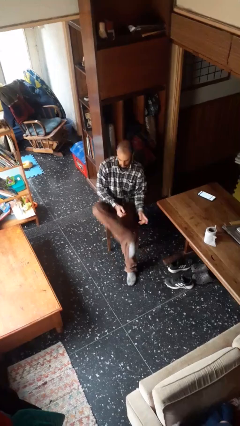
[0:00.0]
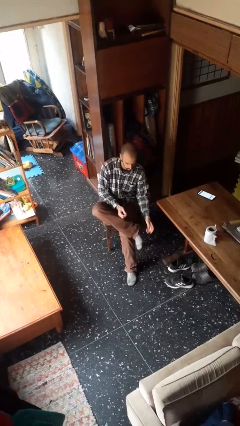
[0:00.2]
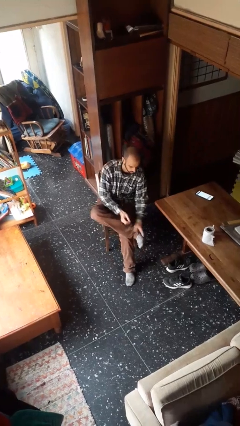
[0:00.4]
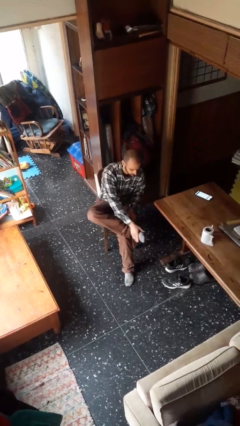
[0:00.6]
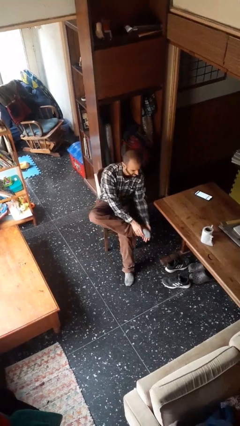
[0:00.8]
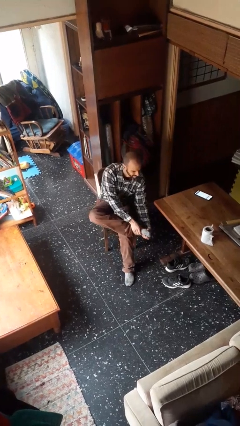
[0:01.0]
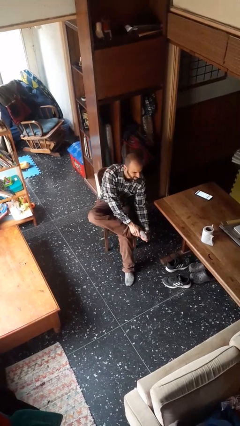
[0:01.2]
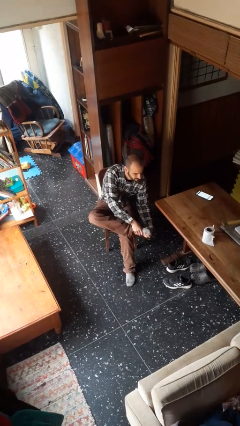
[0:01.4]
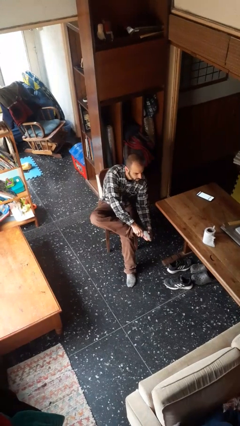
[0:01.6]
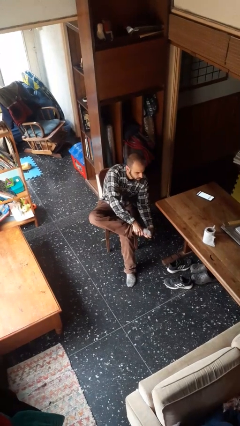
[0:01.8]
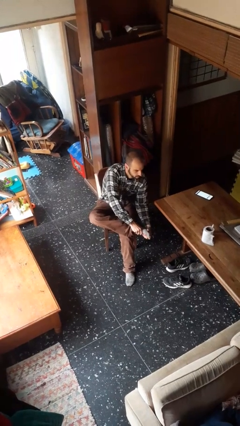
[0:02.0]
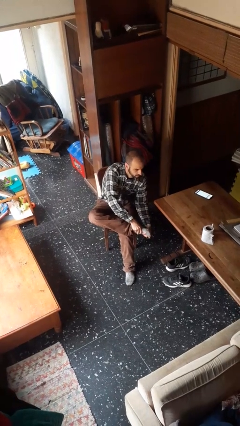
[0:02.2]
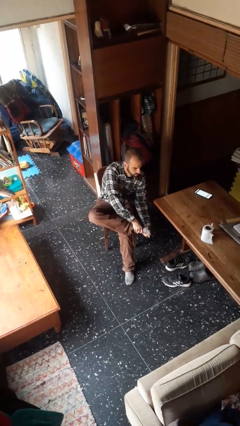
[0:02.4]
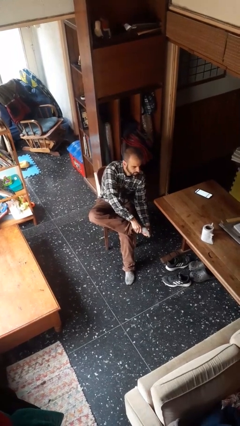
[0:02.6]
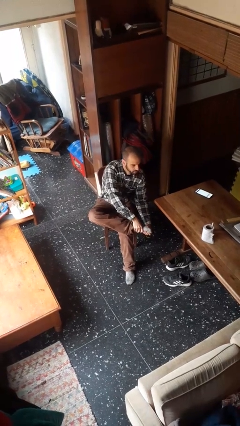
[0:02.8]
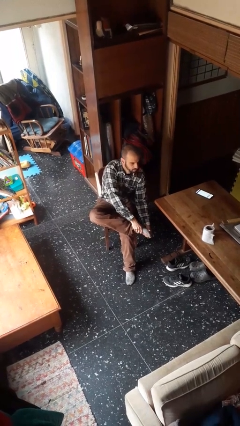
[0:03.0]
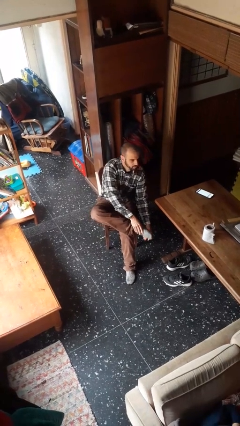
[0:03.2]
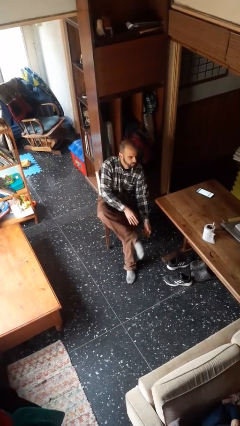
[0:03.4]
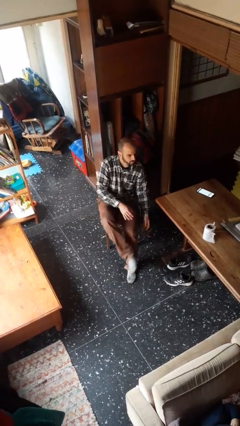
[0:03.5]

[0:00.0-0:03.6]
person rubs foot

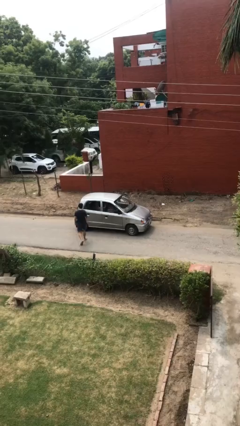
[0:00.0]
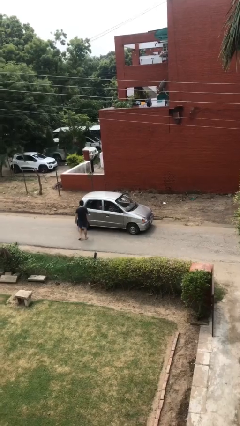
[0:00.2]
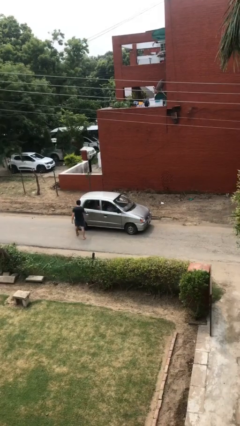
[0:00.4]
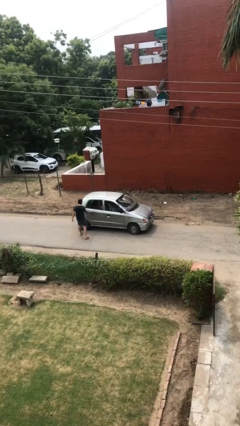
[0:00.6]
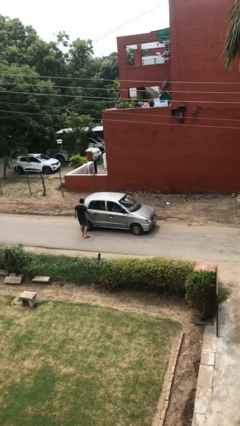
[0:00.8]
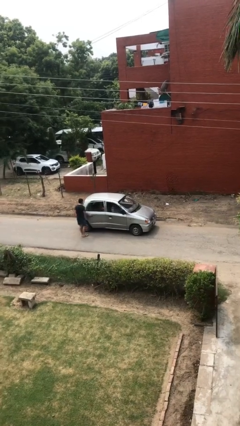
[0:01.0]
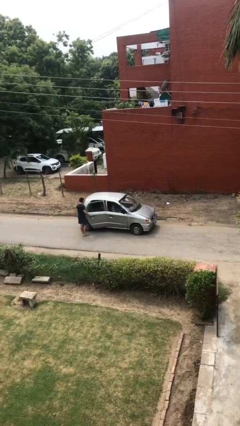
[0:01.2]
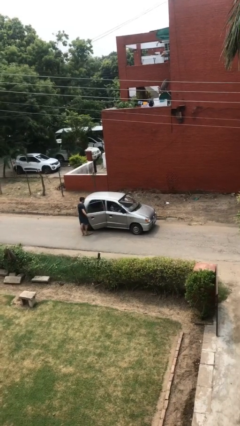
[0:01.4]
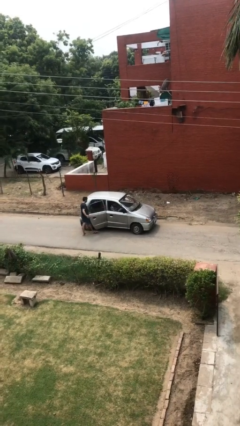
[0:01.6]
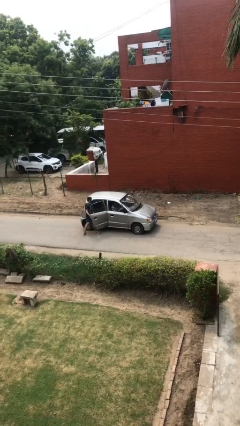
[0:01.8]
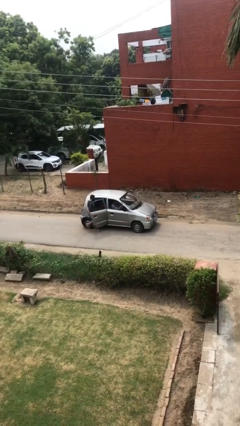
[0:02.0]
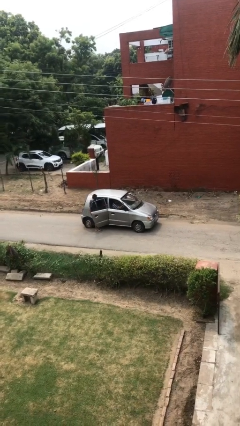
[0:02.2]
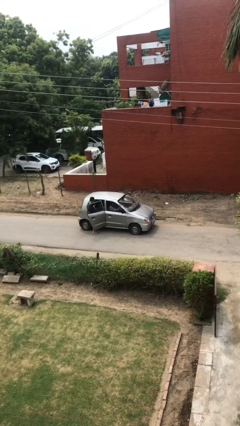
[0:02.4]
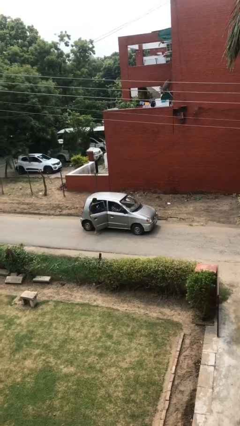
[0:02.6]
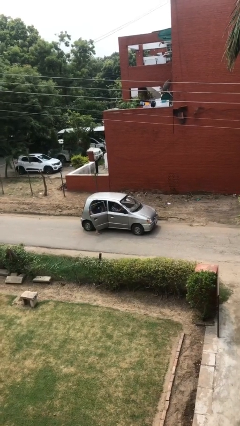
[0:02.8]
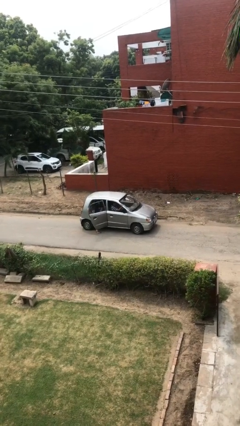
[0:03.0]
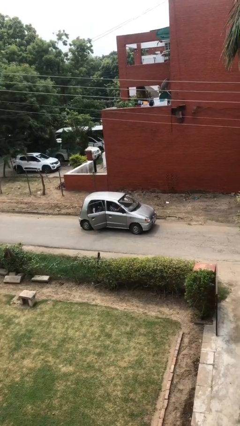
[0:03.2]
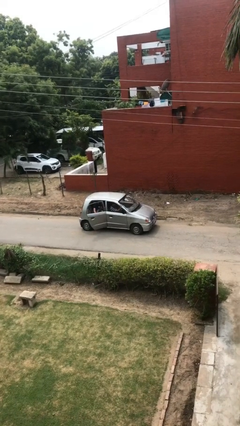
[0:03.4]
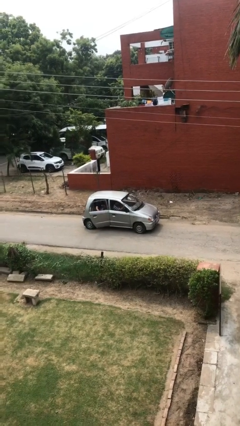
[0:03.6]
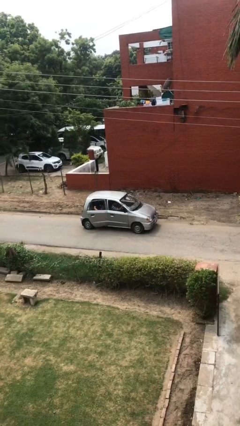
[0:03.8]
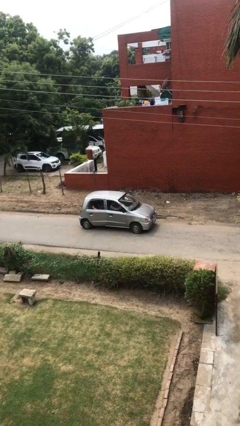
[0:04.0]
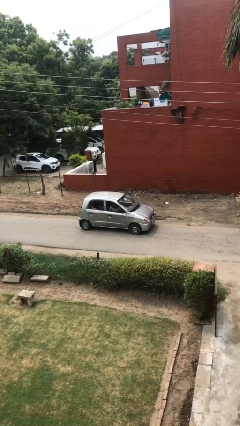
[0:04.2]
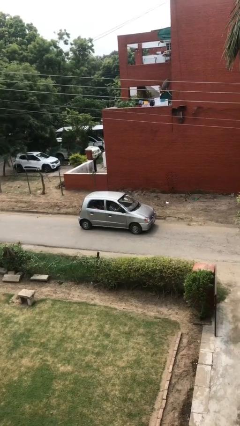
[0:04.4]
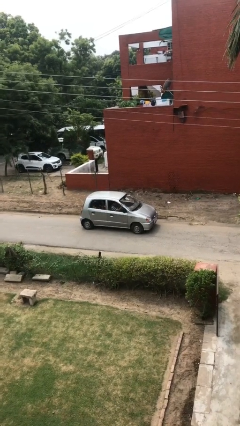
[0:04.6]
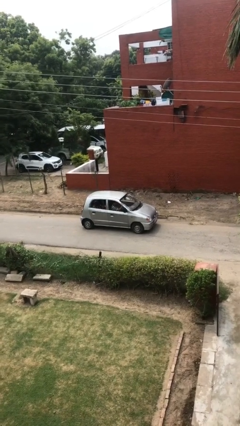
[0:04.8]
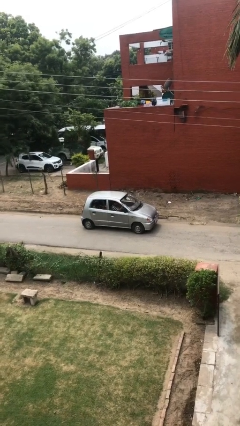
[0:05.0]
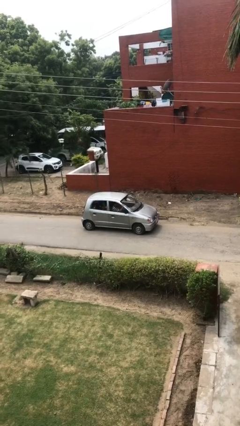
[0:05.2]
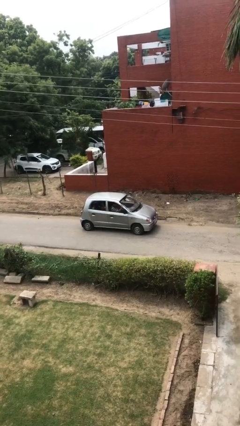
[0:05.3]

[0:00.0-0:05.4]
car picks up person

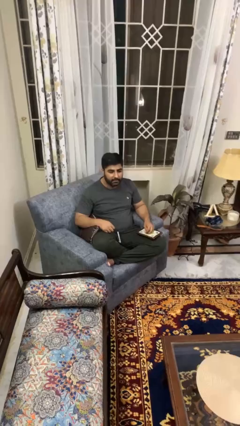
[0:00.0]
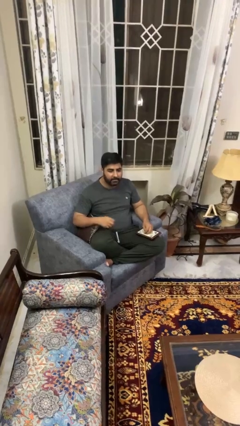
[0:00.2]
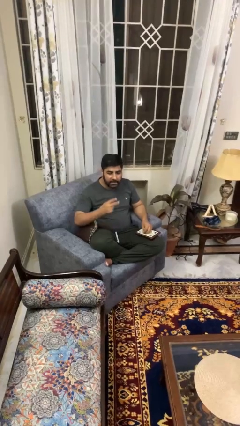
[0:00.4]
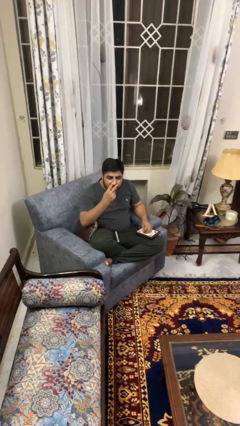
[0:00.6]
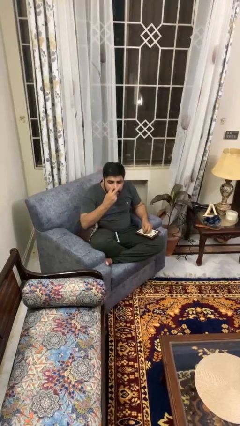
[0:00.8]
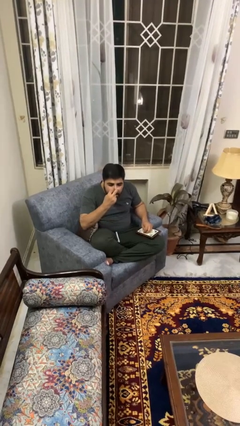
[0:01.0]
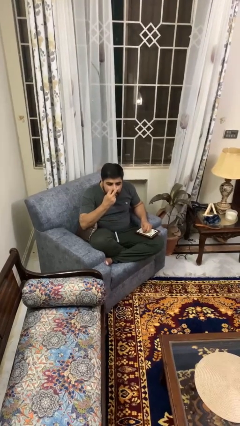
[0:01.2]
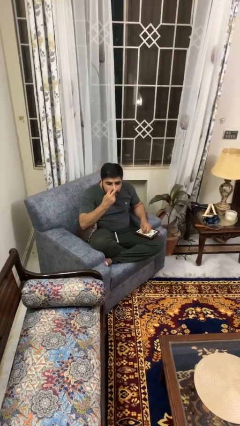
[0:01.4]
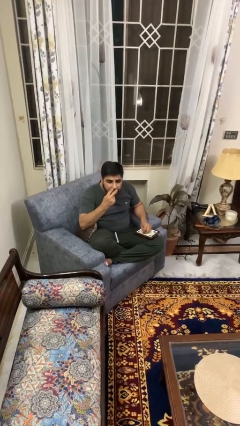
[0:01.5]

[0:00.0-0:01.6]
person gestures watch closely

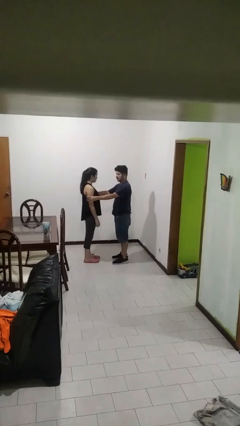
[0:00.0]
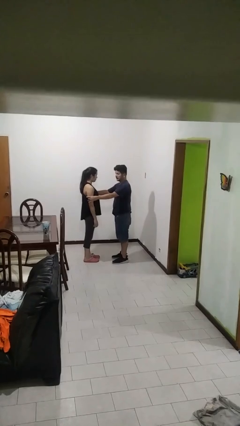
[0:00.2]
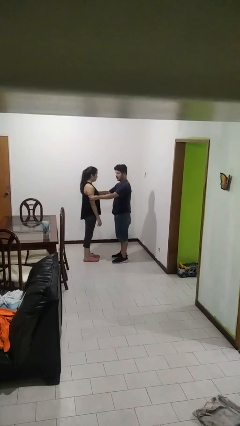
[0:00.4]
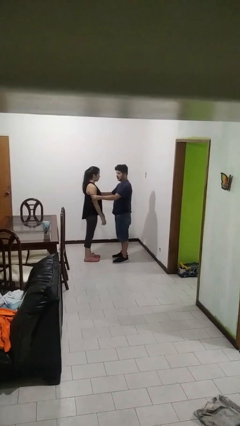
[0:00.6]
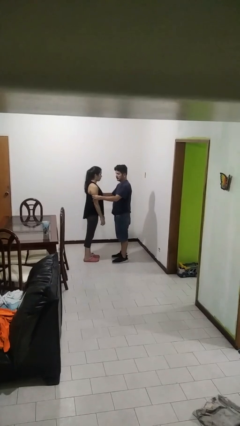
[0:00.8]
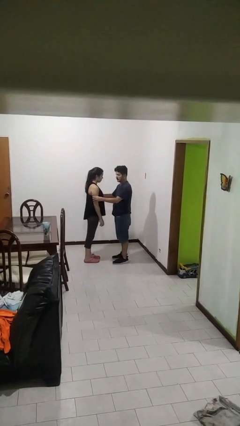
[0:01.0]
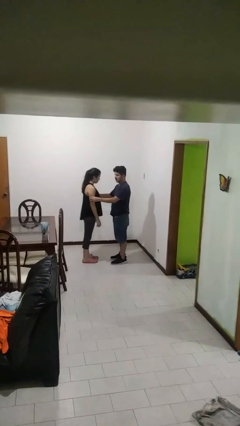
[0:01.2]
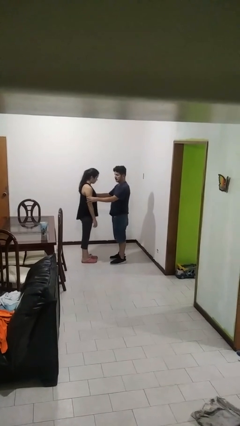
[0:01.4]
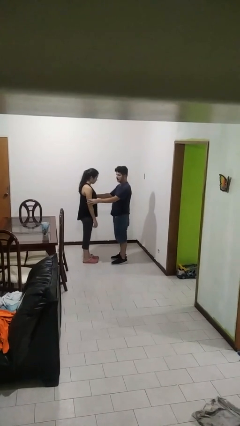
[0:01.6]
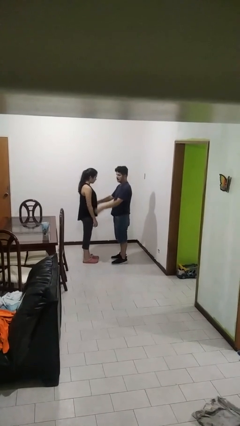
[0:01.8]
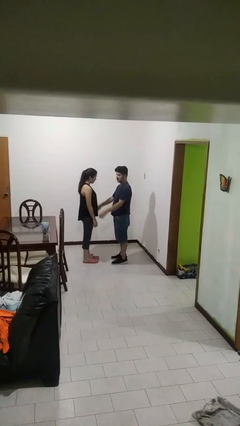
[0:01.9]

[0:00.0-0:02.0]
person grabs person by bicep

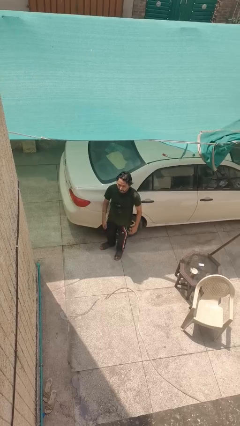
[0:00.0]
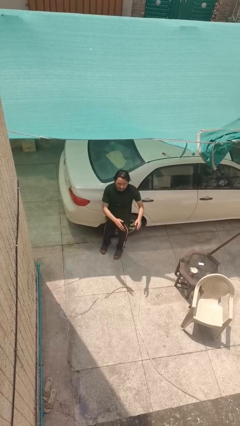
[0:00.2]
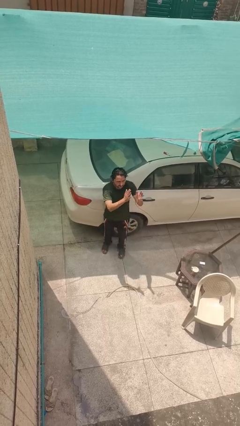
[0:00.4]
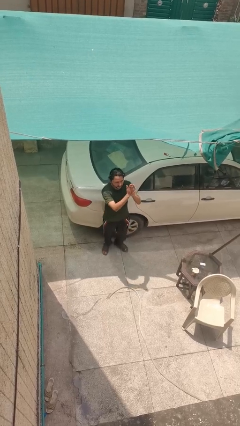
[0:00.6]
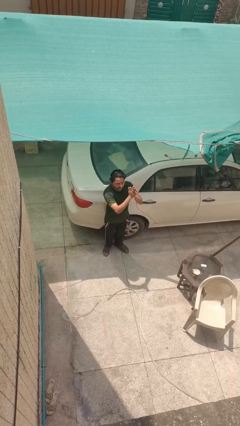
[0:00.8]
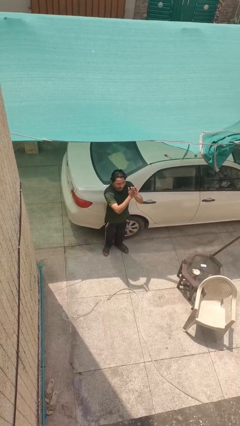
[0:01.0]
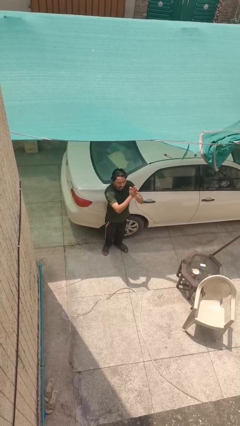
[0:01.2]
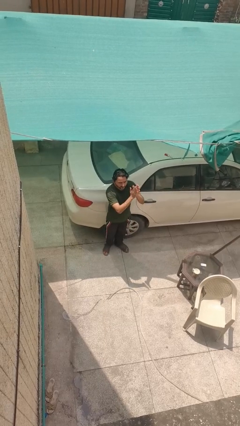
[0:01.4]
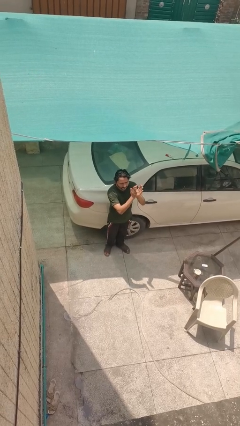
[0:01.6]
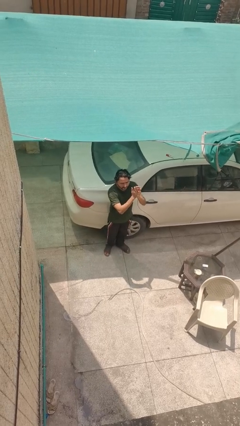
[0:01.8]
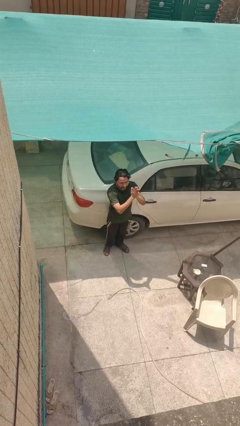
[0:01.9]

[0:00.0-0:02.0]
person claps hands

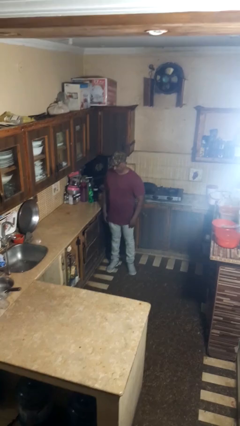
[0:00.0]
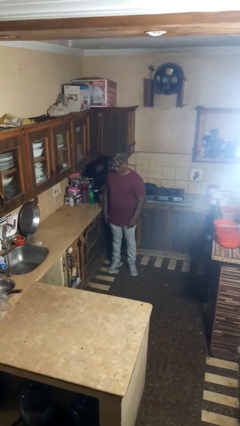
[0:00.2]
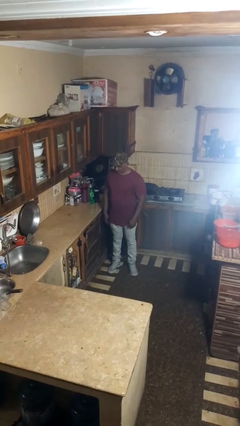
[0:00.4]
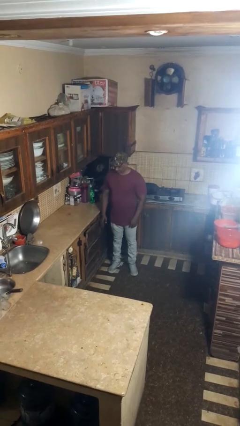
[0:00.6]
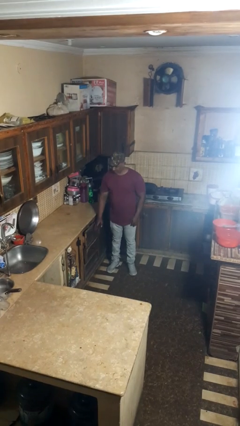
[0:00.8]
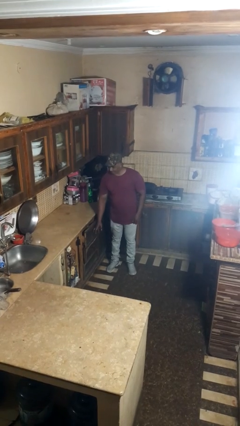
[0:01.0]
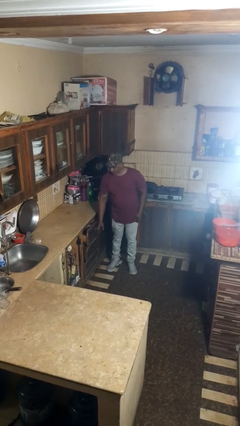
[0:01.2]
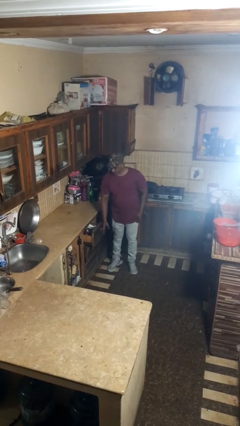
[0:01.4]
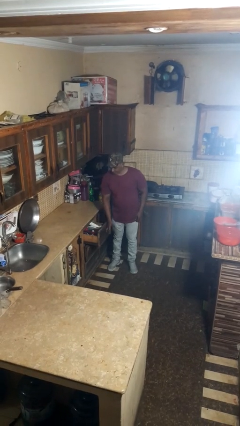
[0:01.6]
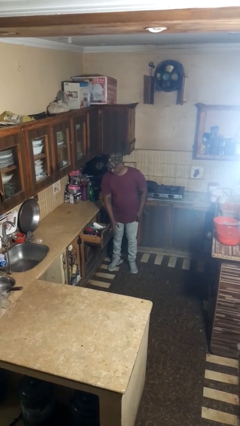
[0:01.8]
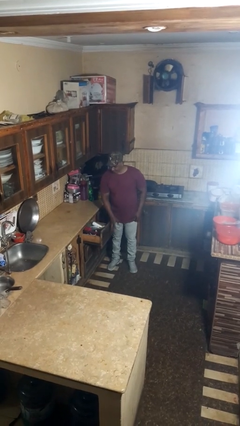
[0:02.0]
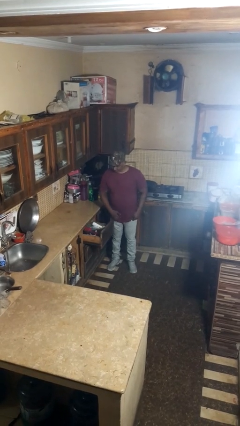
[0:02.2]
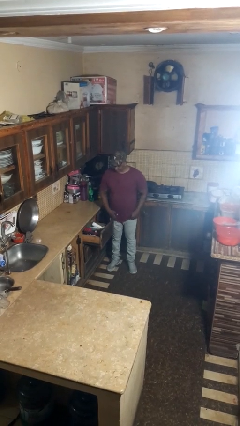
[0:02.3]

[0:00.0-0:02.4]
person opens kitchen drawer

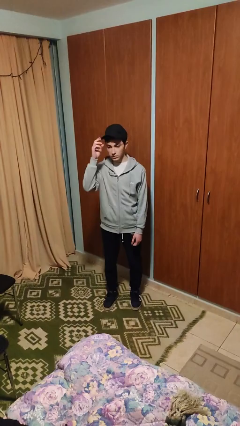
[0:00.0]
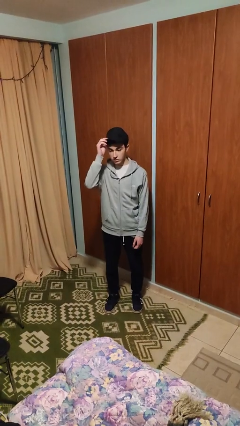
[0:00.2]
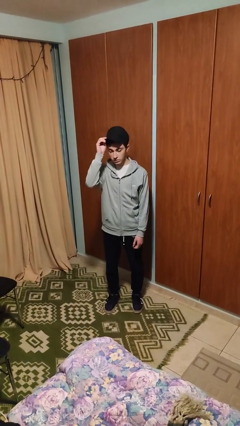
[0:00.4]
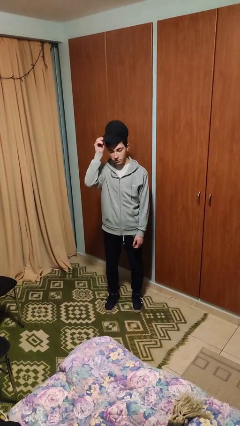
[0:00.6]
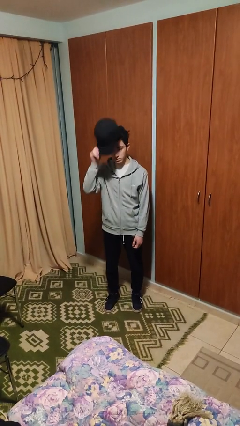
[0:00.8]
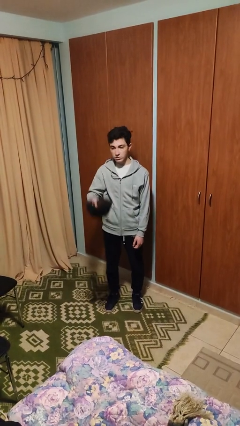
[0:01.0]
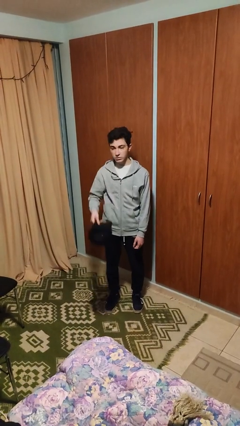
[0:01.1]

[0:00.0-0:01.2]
person takes off hat
